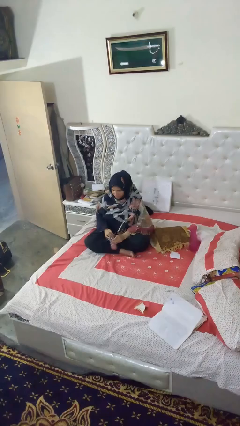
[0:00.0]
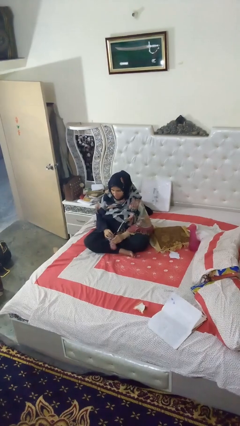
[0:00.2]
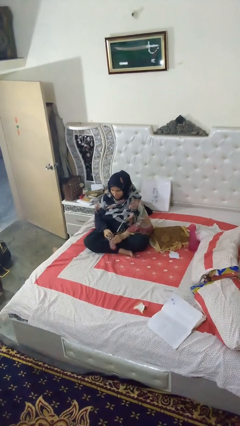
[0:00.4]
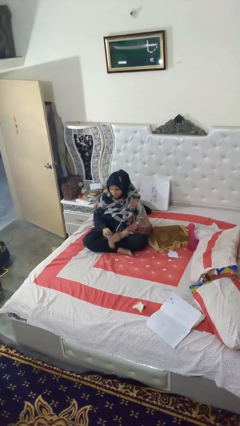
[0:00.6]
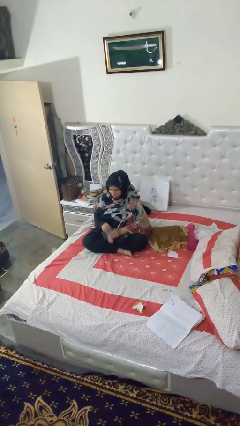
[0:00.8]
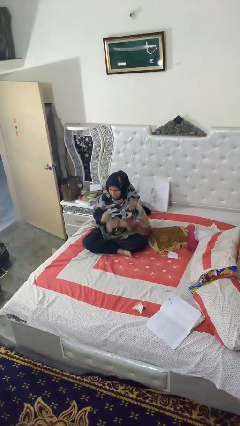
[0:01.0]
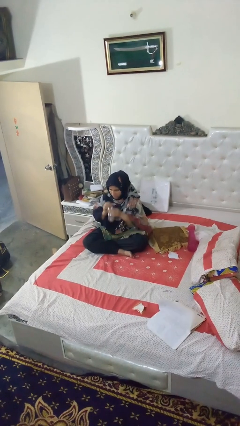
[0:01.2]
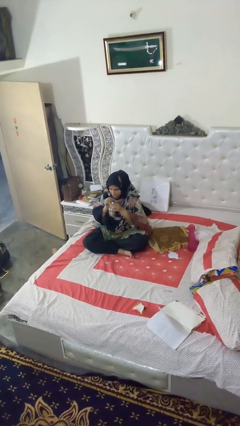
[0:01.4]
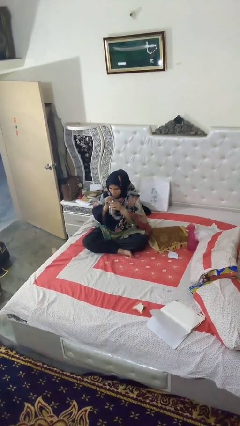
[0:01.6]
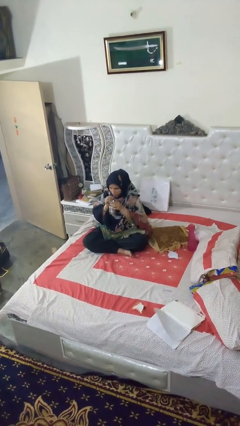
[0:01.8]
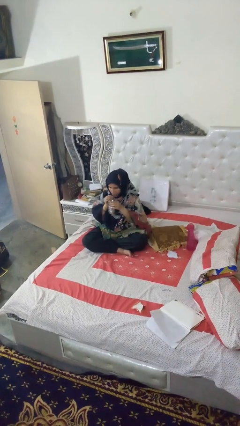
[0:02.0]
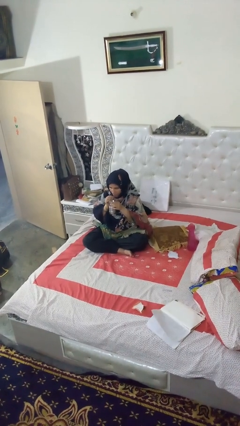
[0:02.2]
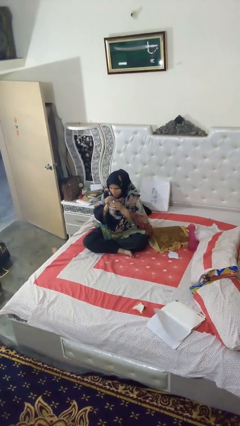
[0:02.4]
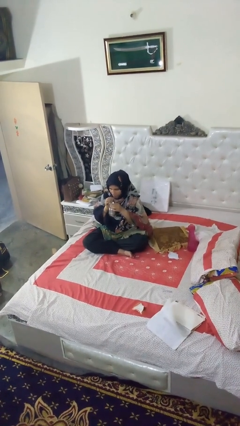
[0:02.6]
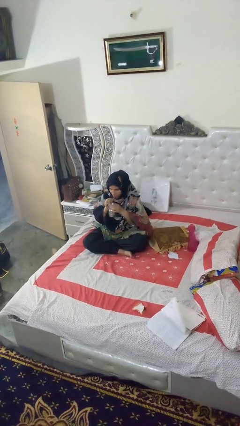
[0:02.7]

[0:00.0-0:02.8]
person drinks from straw

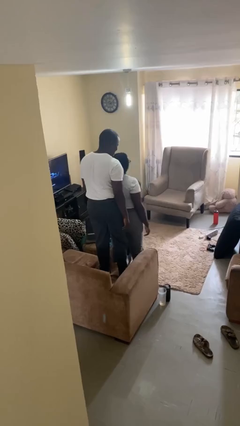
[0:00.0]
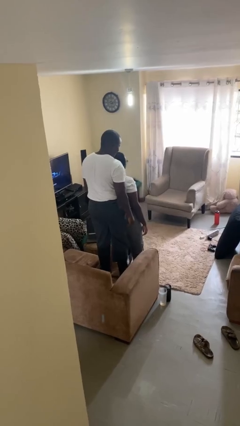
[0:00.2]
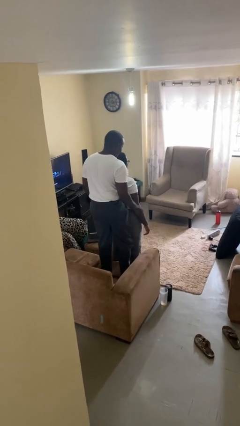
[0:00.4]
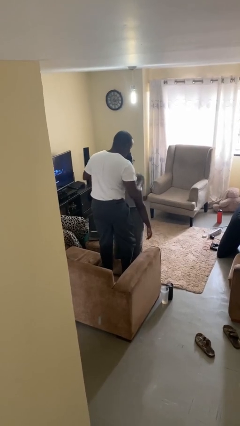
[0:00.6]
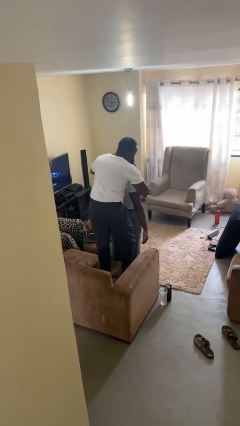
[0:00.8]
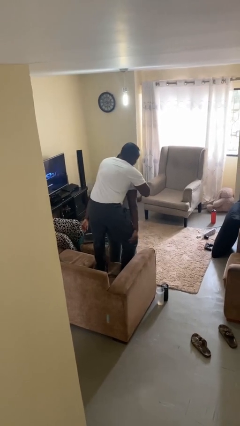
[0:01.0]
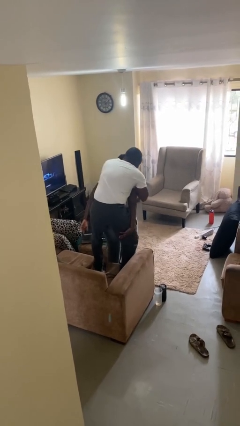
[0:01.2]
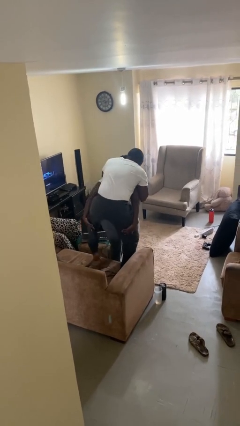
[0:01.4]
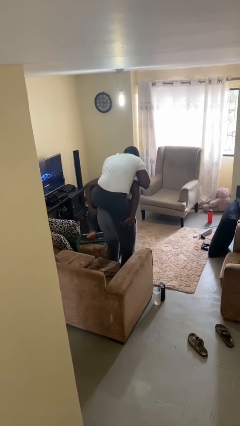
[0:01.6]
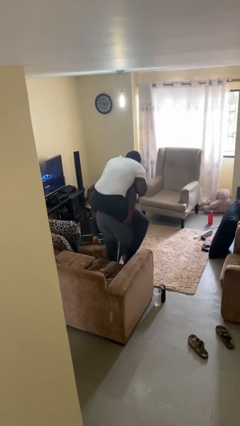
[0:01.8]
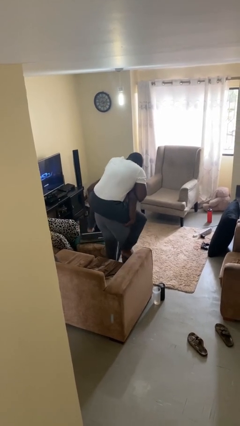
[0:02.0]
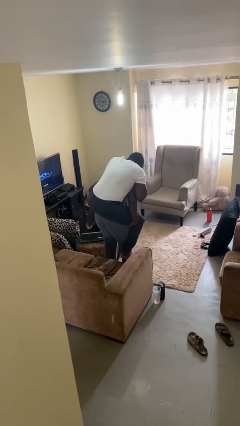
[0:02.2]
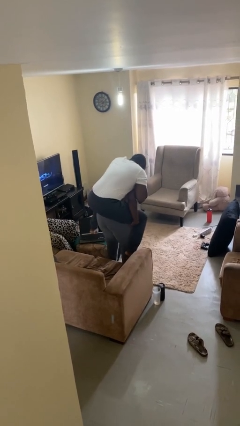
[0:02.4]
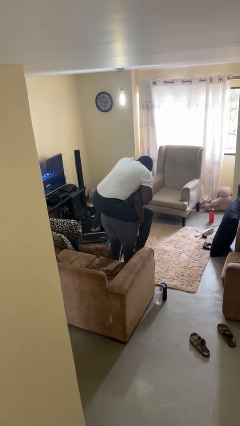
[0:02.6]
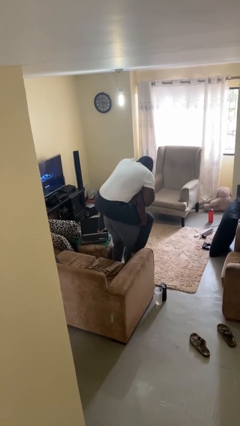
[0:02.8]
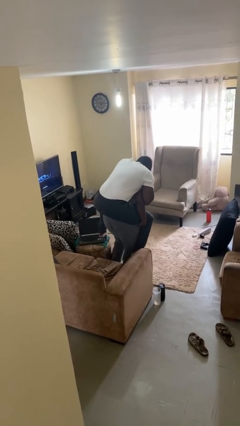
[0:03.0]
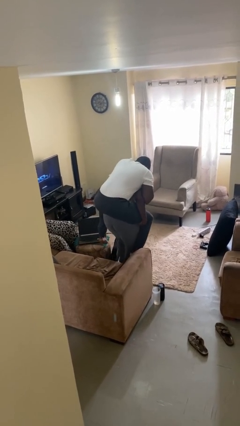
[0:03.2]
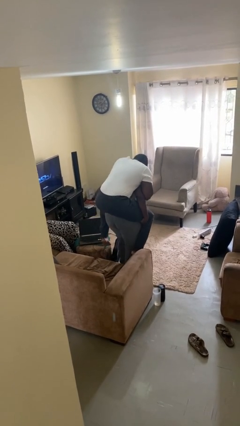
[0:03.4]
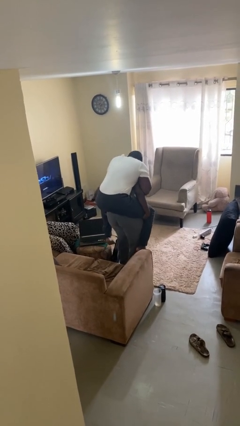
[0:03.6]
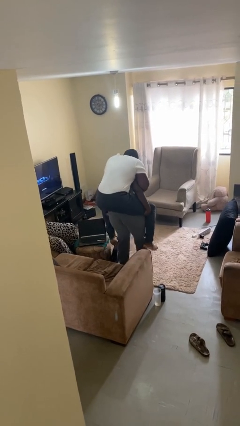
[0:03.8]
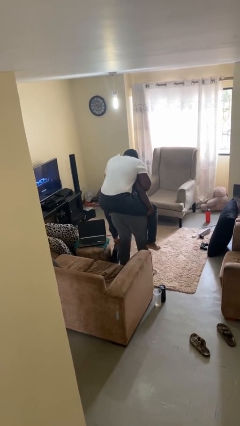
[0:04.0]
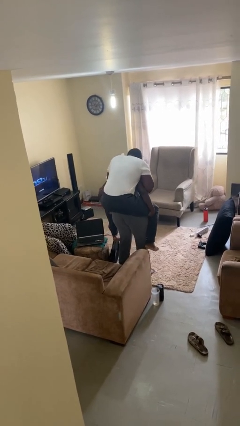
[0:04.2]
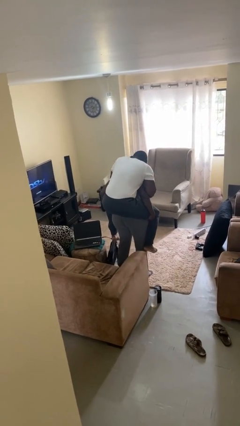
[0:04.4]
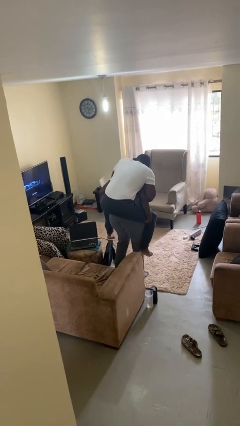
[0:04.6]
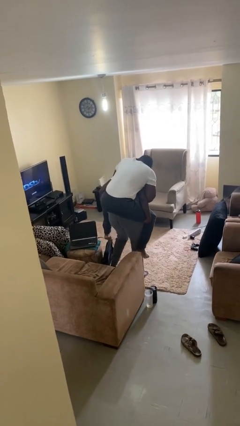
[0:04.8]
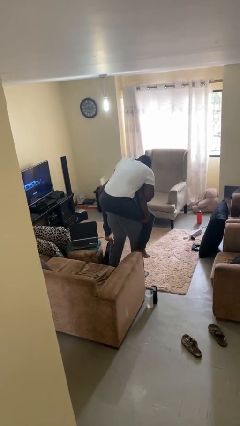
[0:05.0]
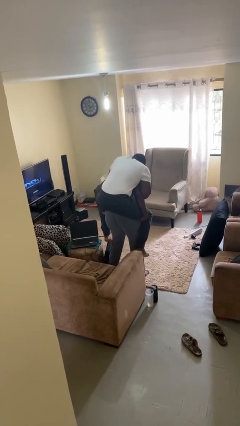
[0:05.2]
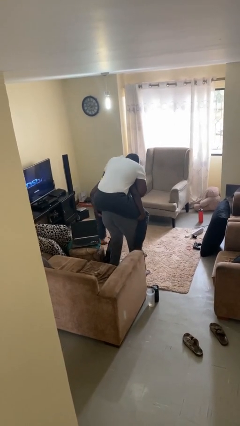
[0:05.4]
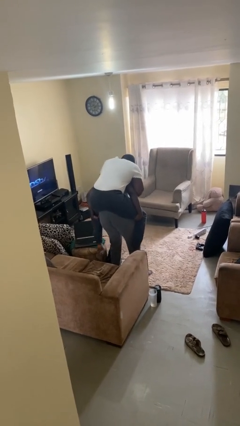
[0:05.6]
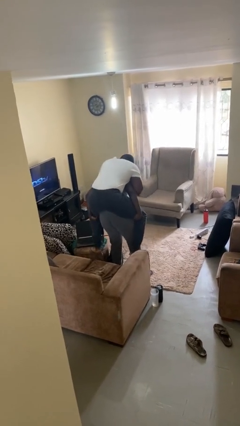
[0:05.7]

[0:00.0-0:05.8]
person carries person on back

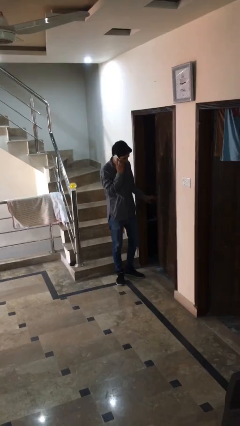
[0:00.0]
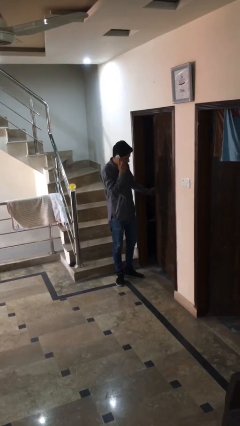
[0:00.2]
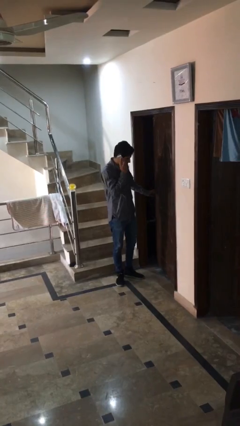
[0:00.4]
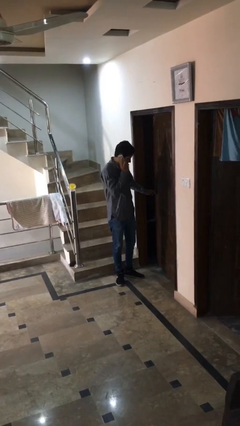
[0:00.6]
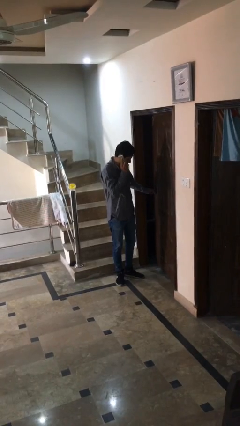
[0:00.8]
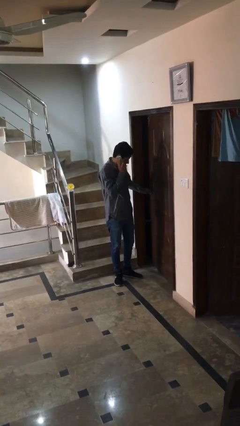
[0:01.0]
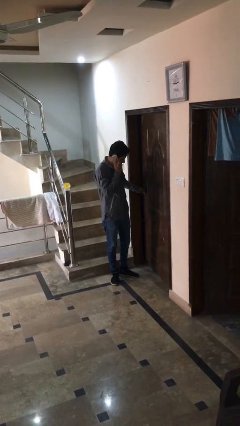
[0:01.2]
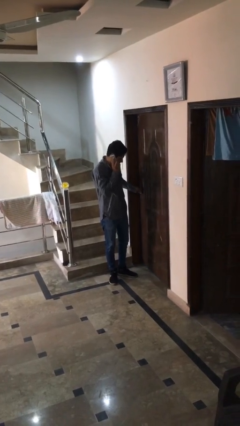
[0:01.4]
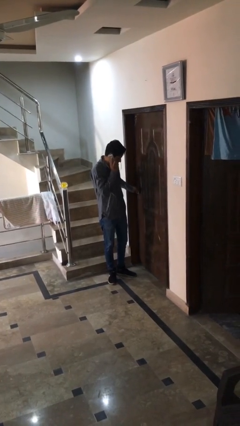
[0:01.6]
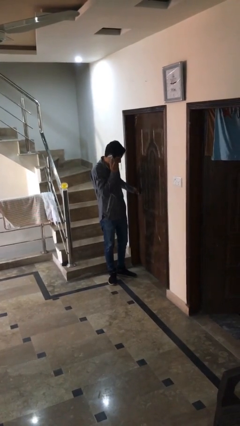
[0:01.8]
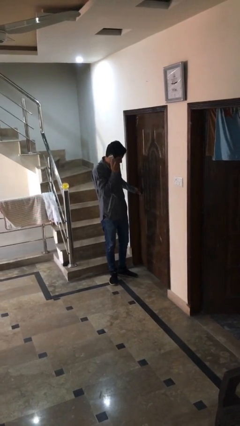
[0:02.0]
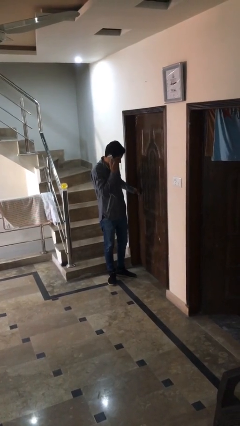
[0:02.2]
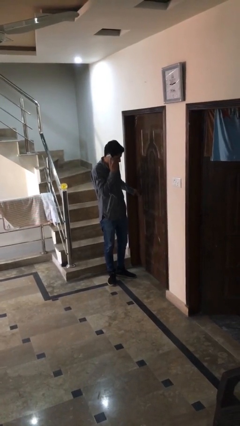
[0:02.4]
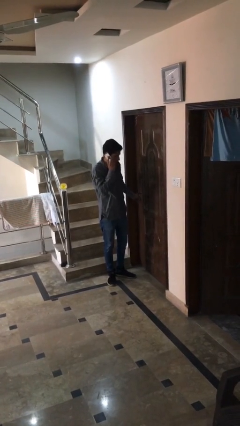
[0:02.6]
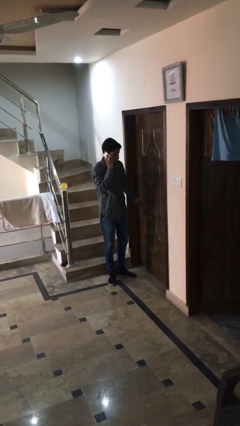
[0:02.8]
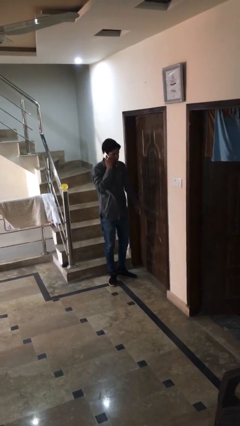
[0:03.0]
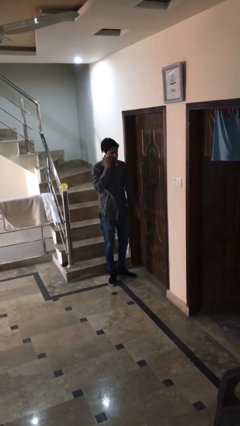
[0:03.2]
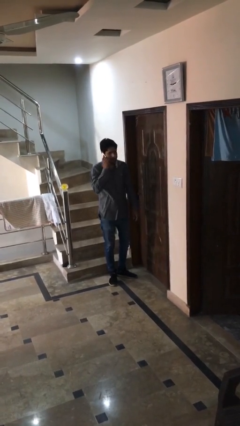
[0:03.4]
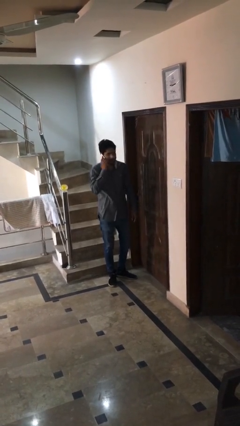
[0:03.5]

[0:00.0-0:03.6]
person closes facility door

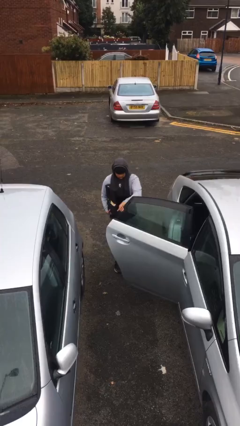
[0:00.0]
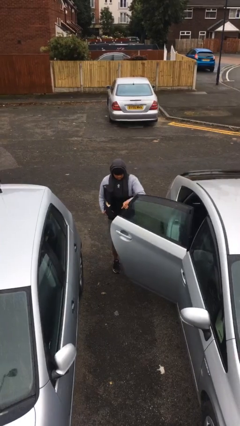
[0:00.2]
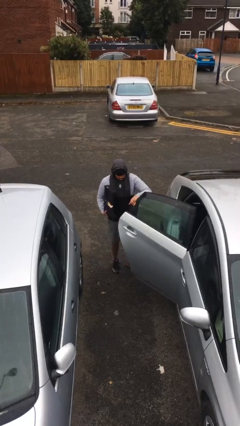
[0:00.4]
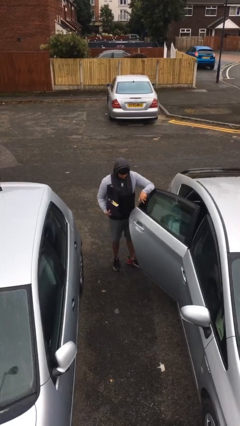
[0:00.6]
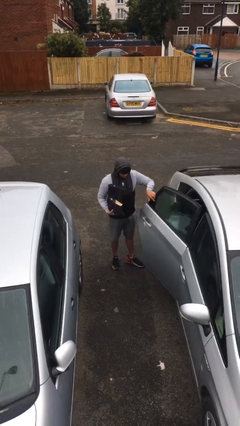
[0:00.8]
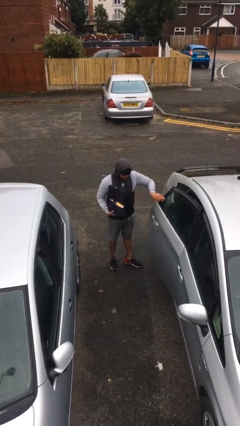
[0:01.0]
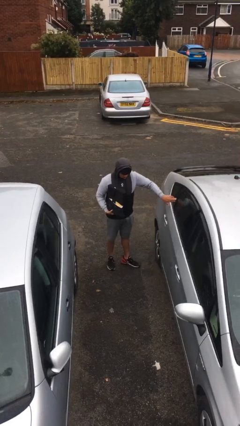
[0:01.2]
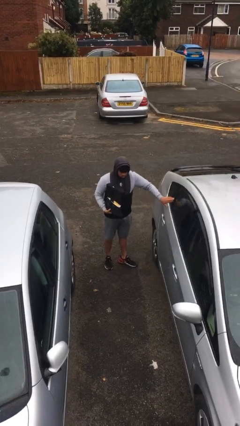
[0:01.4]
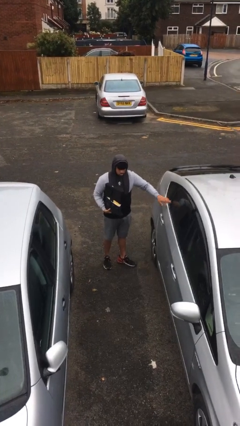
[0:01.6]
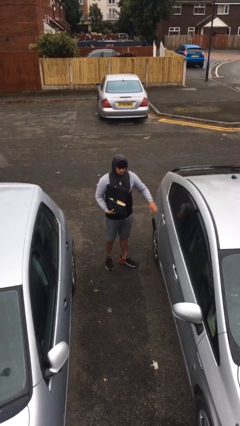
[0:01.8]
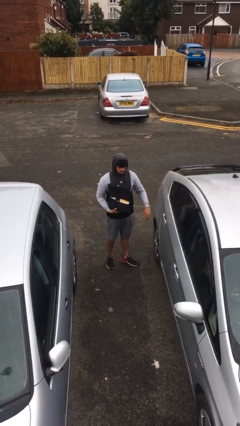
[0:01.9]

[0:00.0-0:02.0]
person closes car door

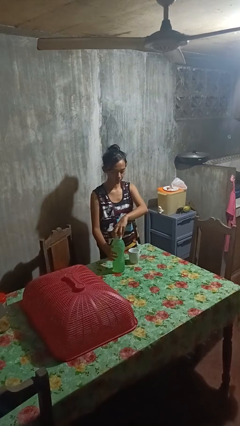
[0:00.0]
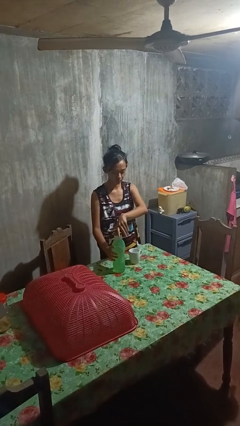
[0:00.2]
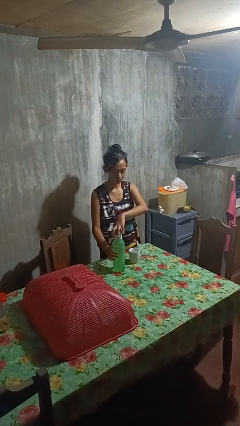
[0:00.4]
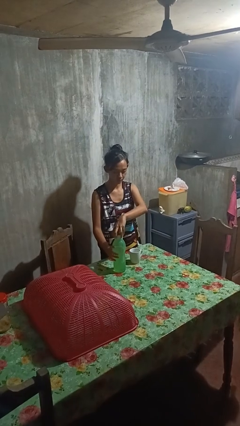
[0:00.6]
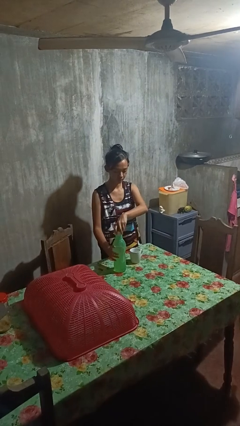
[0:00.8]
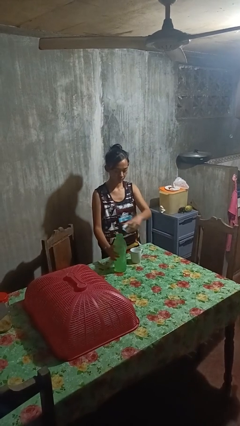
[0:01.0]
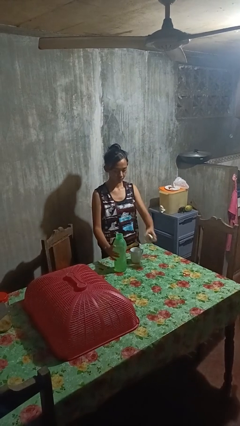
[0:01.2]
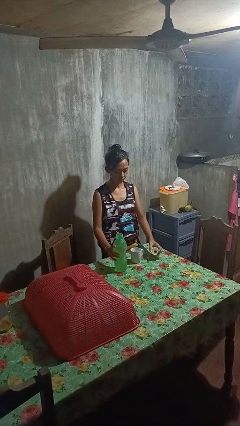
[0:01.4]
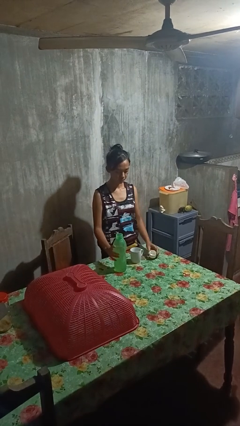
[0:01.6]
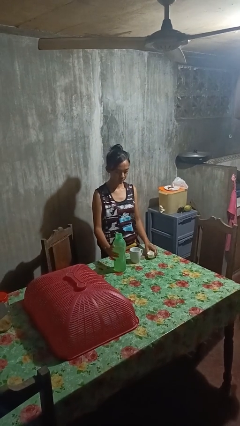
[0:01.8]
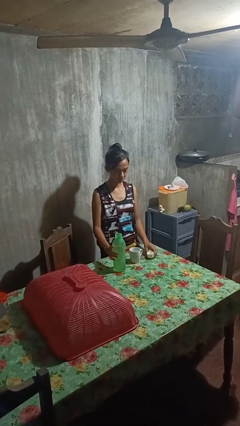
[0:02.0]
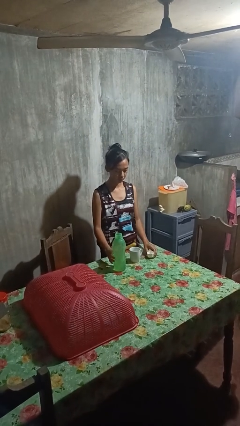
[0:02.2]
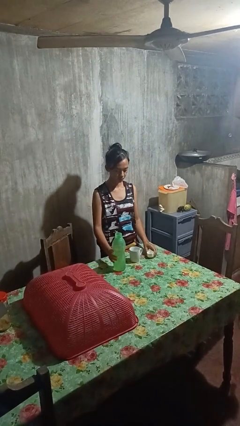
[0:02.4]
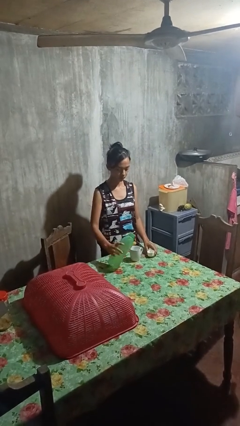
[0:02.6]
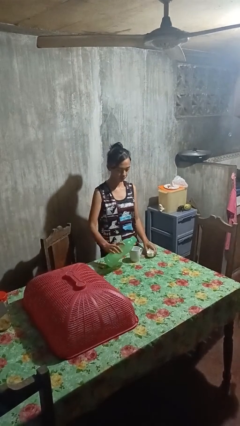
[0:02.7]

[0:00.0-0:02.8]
person unscrews lid from bottle
